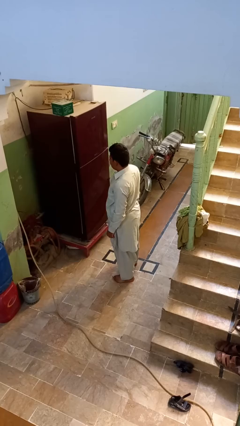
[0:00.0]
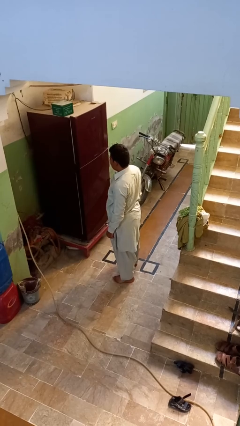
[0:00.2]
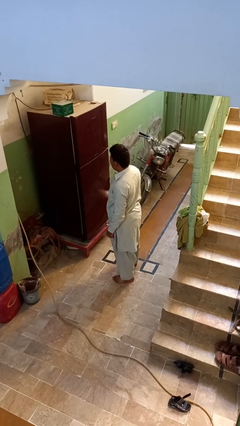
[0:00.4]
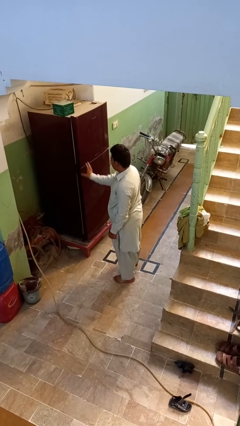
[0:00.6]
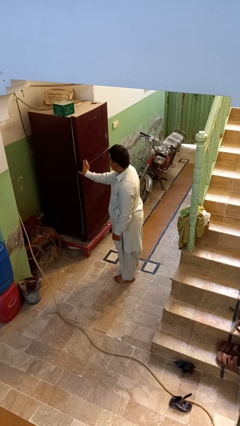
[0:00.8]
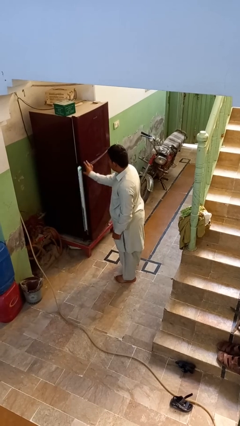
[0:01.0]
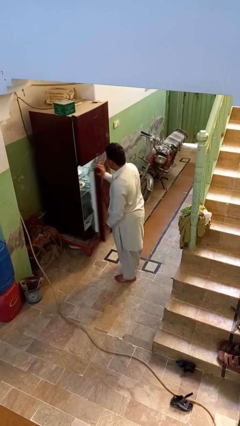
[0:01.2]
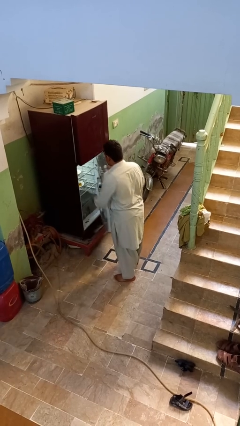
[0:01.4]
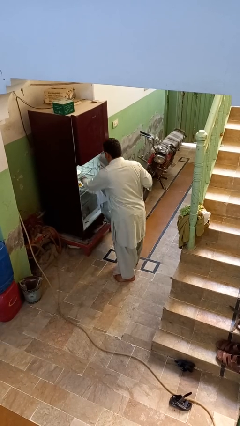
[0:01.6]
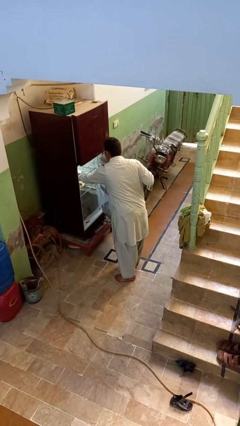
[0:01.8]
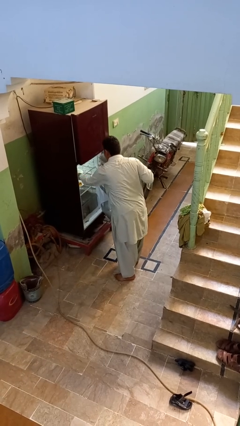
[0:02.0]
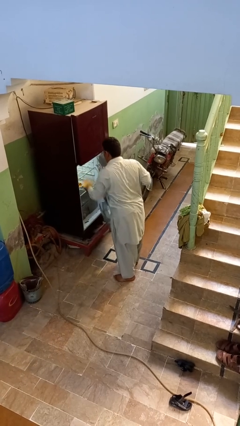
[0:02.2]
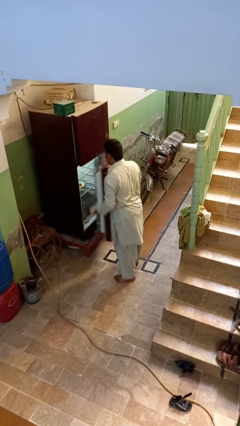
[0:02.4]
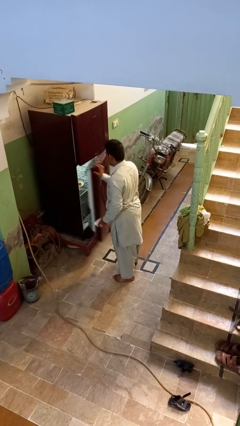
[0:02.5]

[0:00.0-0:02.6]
person takes object from refrigerator

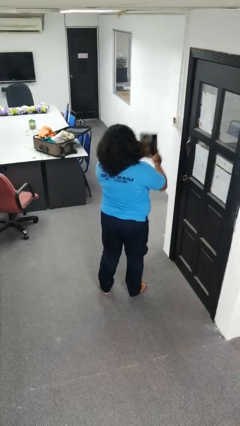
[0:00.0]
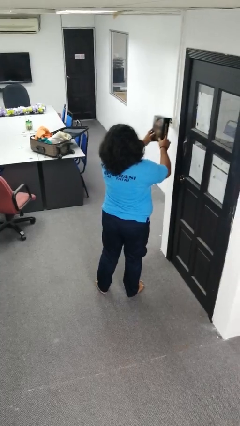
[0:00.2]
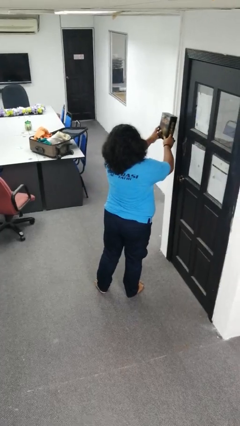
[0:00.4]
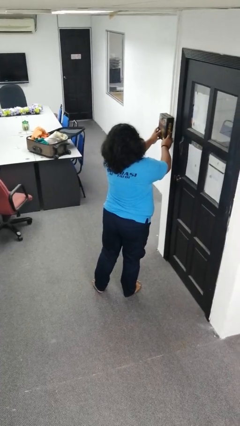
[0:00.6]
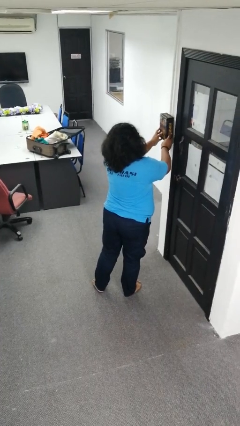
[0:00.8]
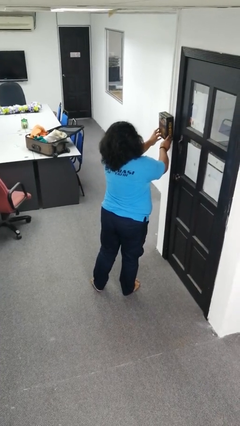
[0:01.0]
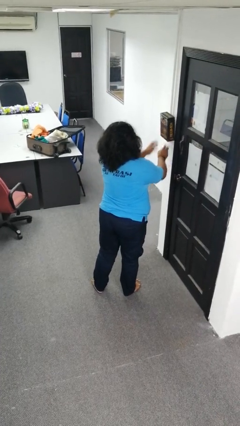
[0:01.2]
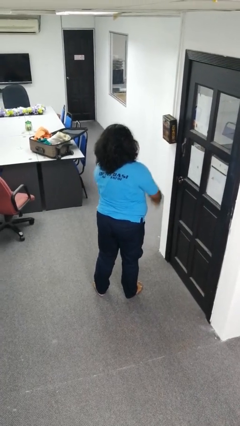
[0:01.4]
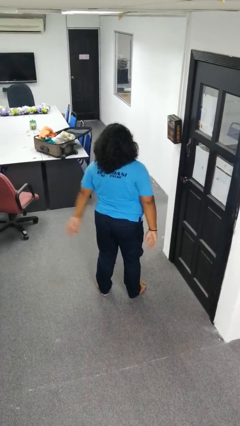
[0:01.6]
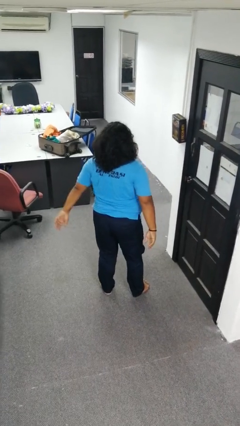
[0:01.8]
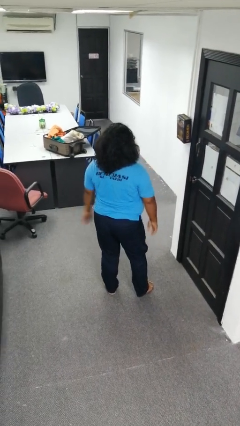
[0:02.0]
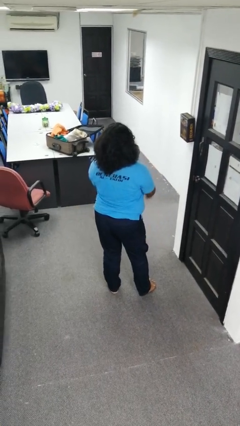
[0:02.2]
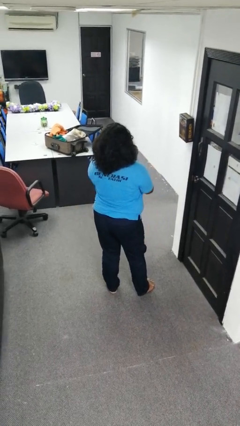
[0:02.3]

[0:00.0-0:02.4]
person puts up picture frame

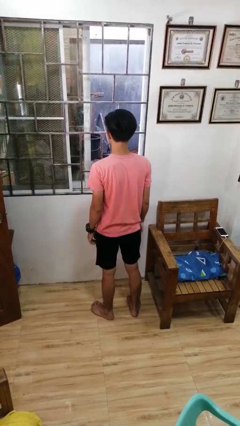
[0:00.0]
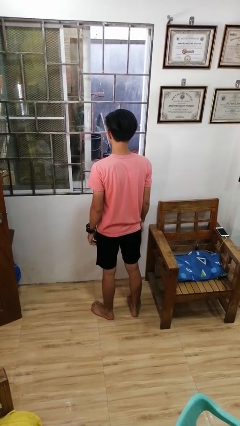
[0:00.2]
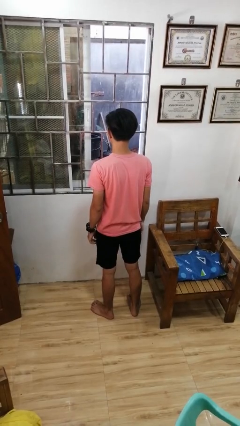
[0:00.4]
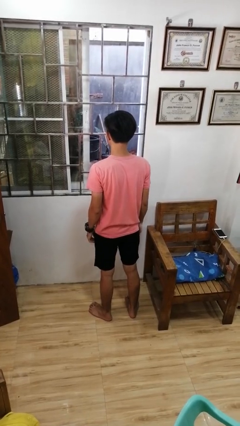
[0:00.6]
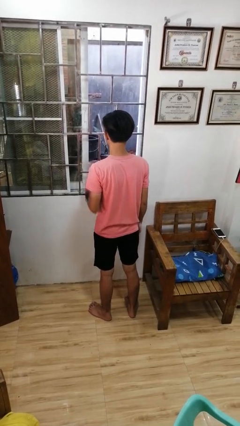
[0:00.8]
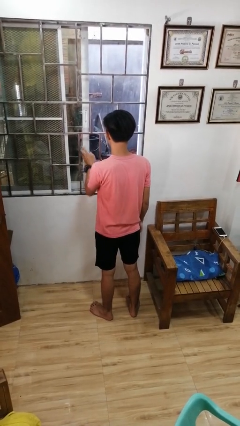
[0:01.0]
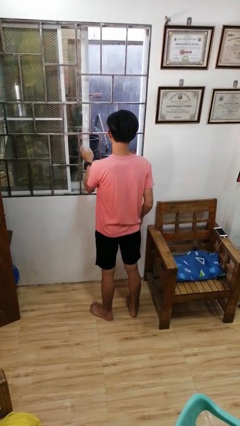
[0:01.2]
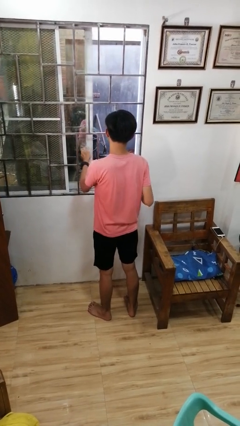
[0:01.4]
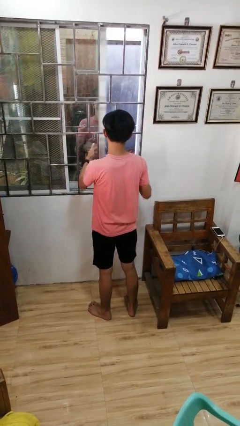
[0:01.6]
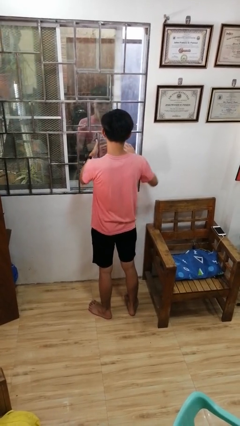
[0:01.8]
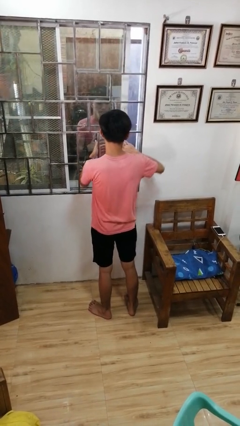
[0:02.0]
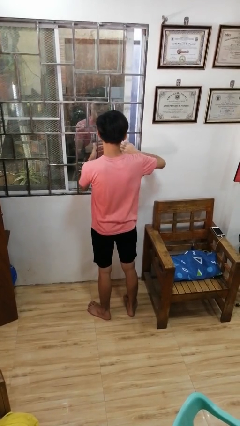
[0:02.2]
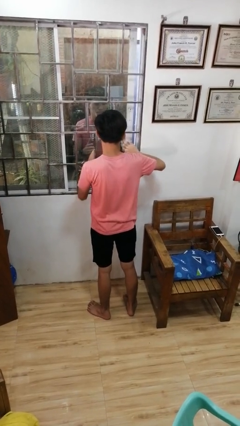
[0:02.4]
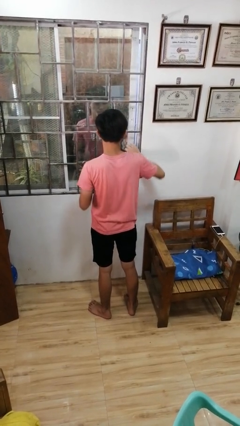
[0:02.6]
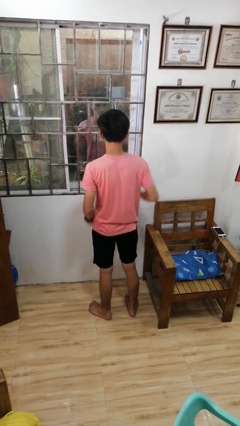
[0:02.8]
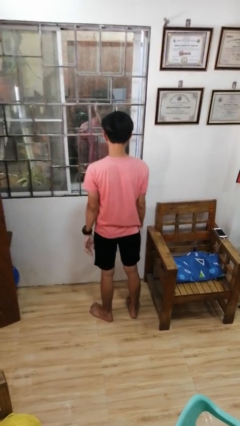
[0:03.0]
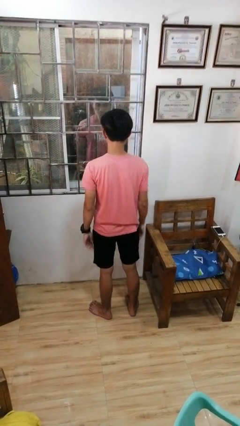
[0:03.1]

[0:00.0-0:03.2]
person closes home window

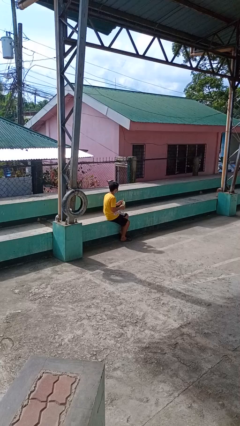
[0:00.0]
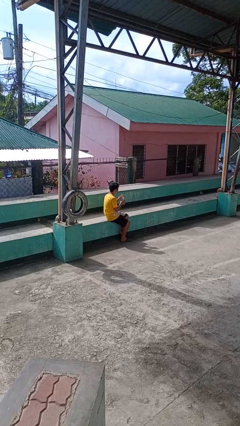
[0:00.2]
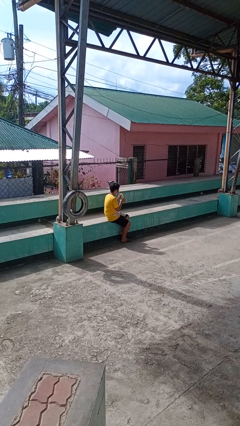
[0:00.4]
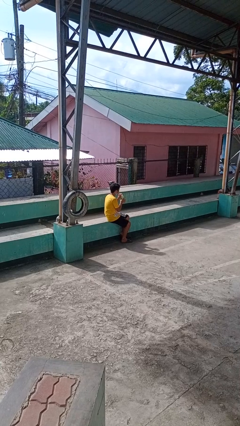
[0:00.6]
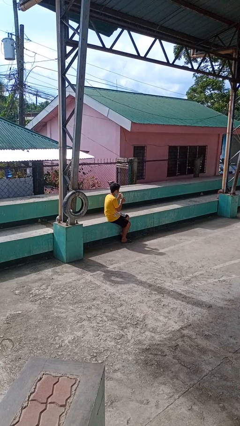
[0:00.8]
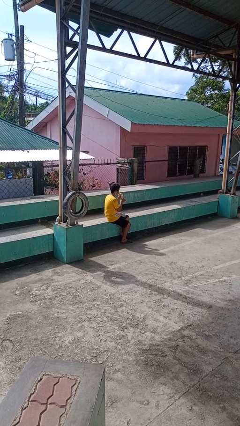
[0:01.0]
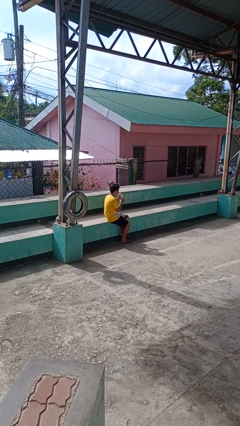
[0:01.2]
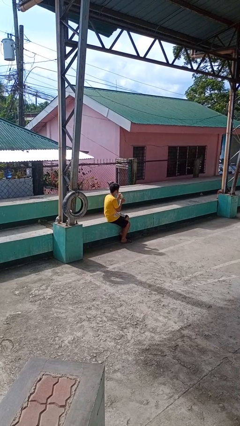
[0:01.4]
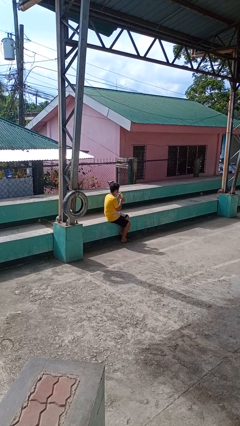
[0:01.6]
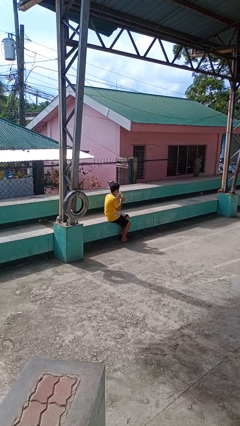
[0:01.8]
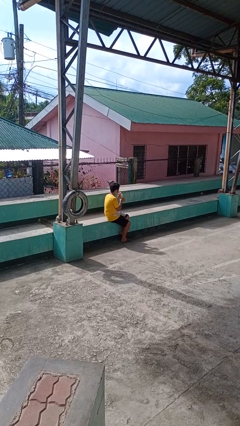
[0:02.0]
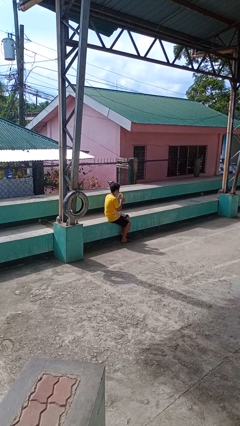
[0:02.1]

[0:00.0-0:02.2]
person drinks from straw

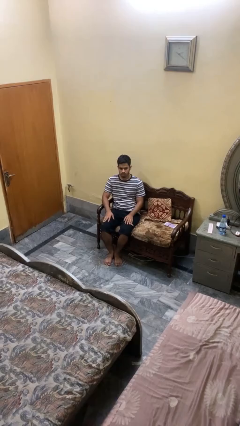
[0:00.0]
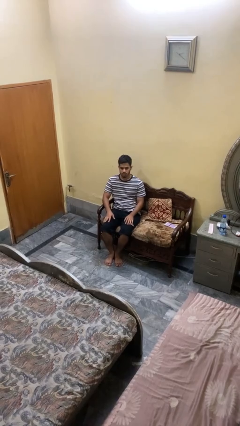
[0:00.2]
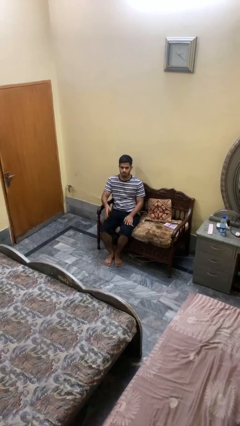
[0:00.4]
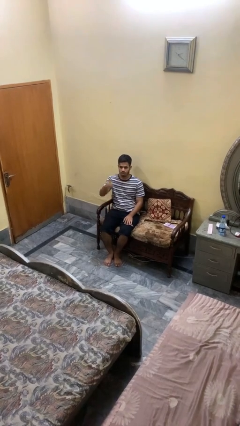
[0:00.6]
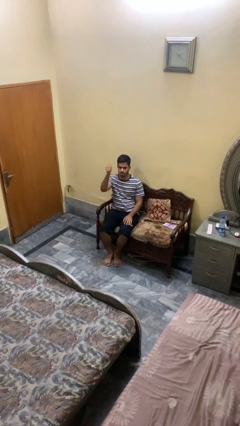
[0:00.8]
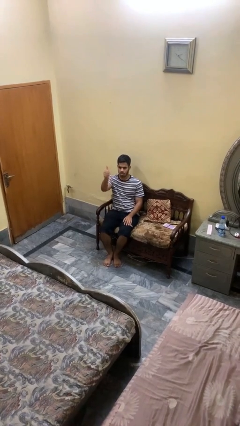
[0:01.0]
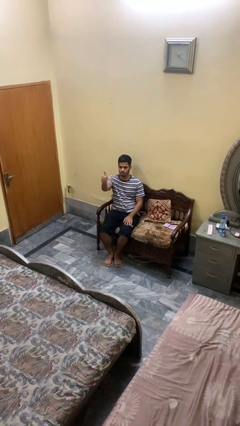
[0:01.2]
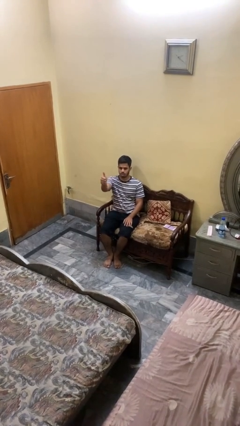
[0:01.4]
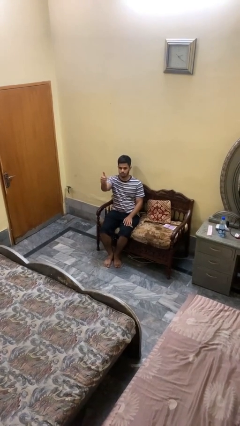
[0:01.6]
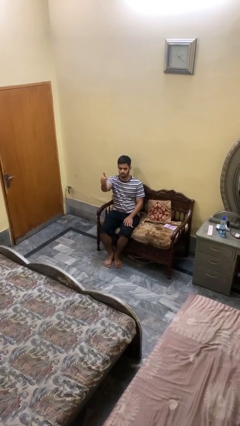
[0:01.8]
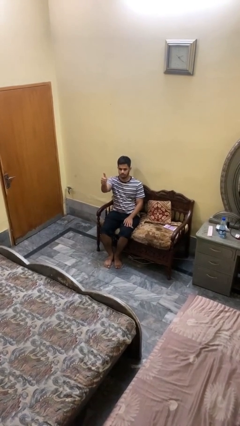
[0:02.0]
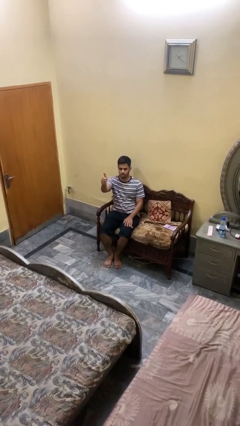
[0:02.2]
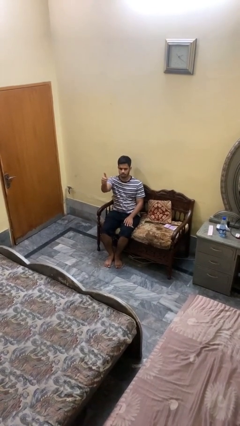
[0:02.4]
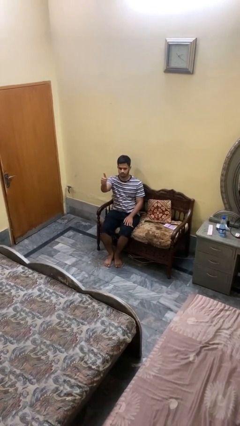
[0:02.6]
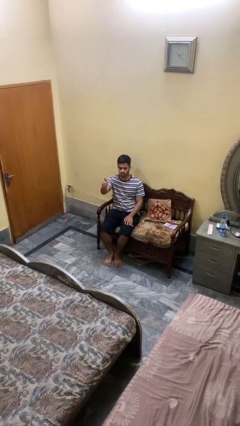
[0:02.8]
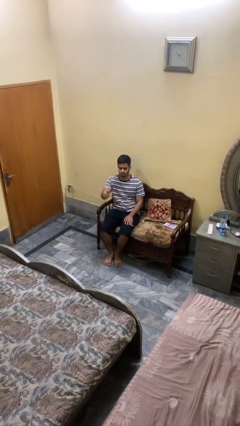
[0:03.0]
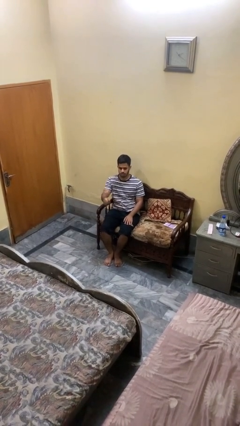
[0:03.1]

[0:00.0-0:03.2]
person gestures thumbs up

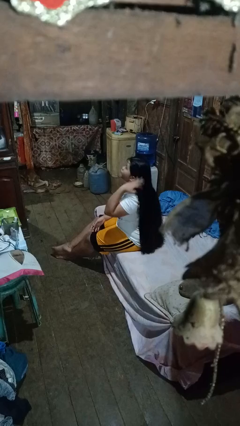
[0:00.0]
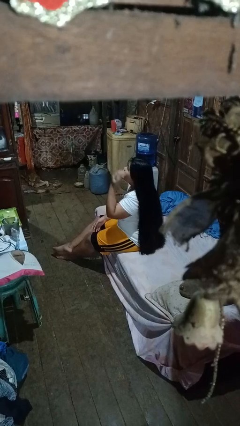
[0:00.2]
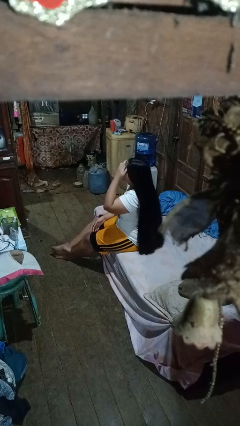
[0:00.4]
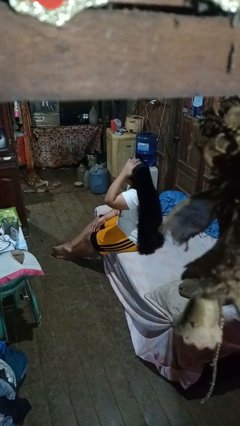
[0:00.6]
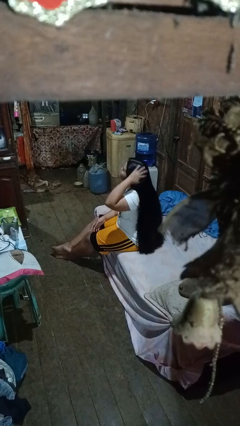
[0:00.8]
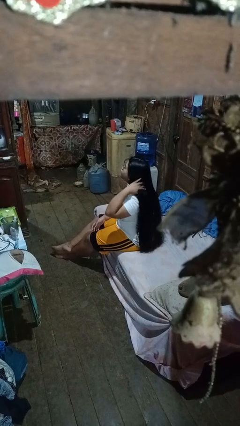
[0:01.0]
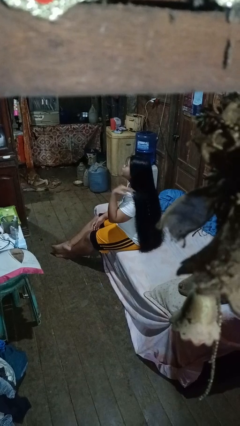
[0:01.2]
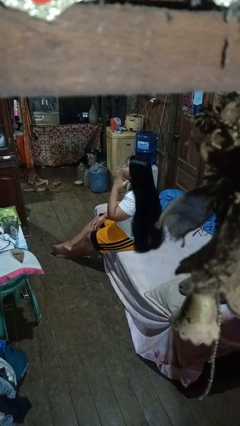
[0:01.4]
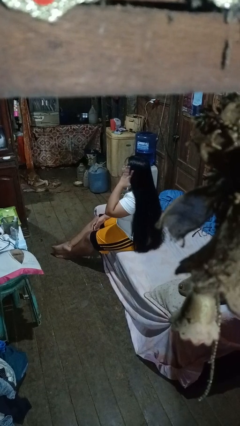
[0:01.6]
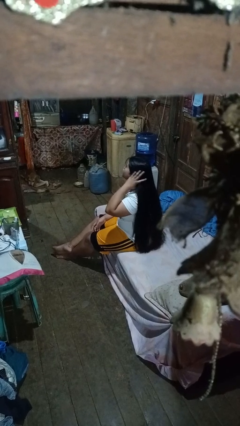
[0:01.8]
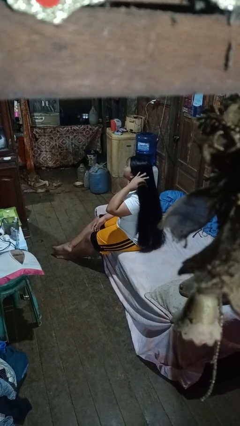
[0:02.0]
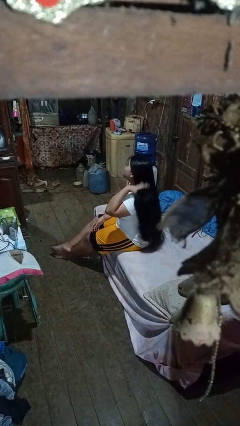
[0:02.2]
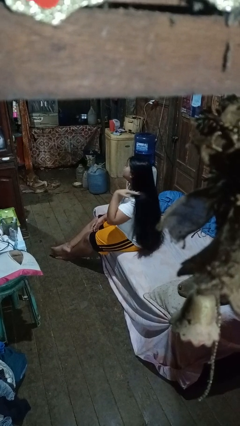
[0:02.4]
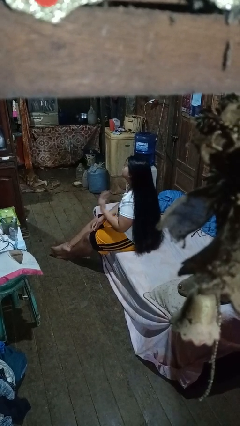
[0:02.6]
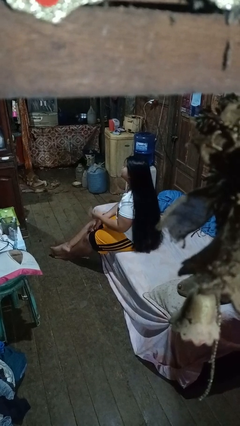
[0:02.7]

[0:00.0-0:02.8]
person strokes hair

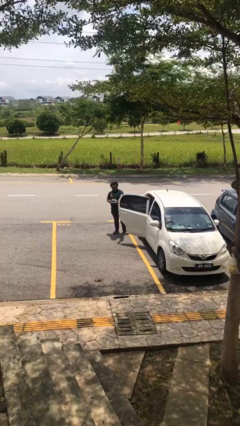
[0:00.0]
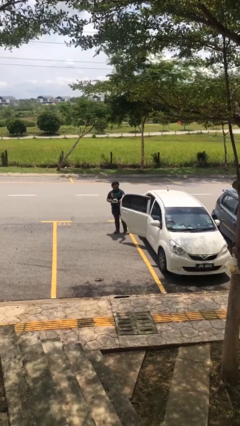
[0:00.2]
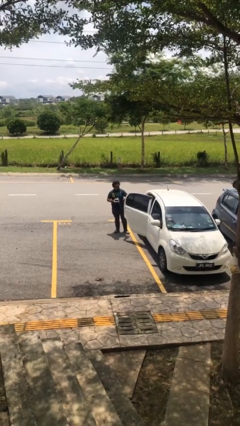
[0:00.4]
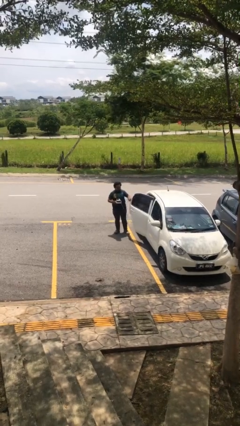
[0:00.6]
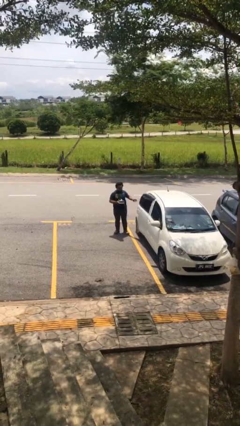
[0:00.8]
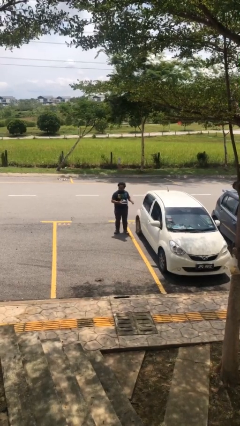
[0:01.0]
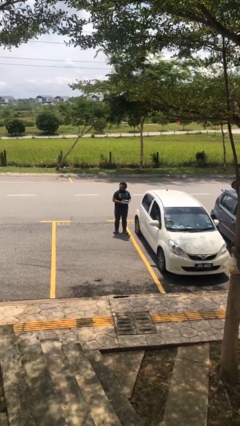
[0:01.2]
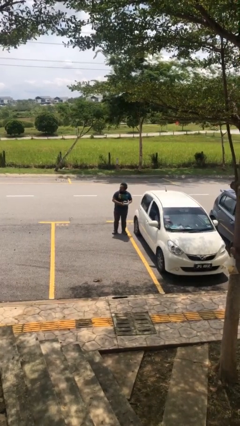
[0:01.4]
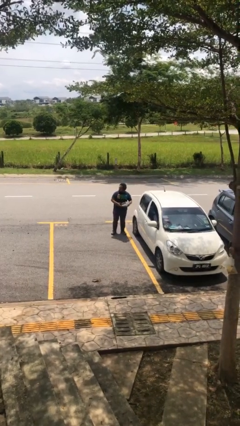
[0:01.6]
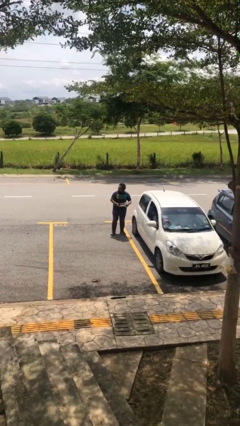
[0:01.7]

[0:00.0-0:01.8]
person closes car door
